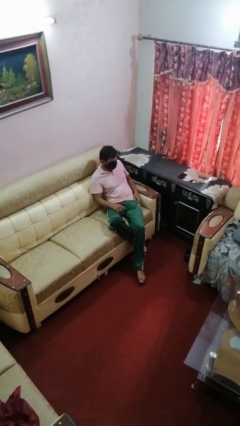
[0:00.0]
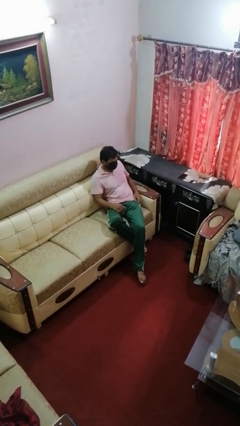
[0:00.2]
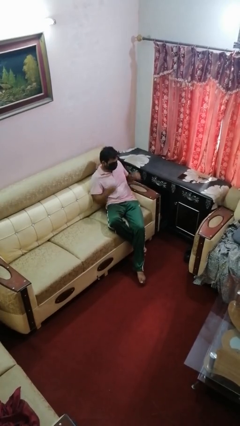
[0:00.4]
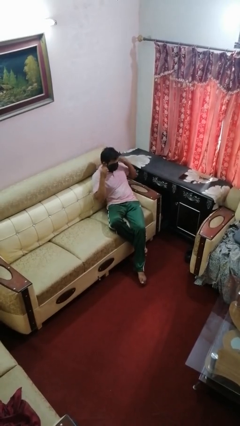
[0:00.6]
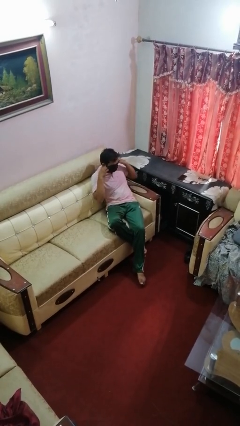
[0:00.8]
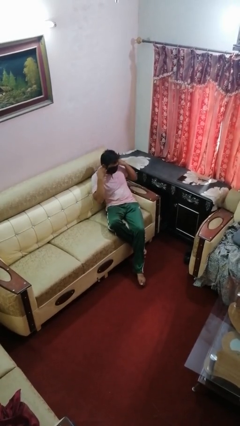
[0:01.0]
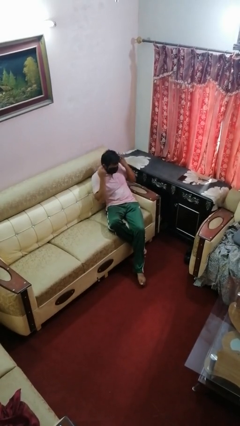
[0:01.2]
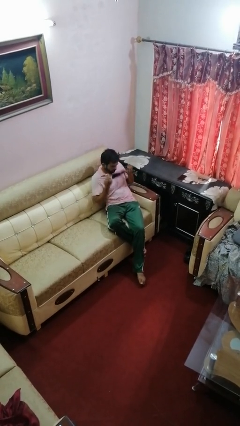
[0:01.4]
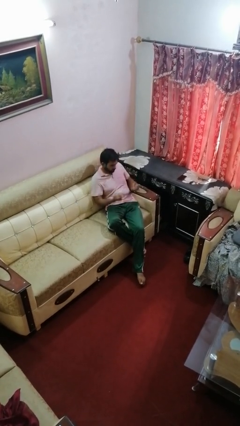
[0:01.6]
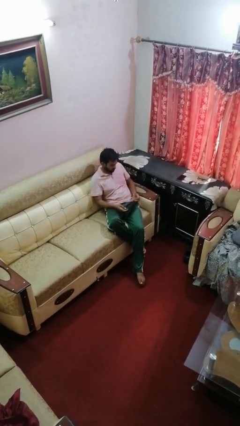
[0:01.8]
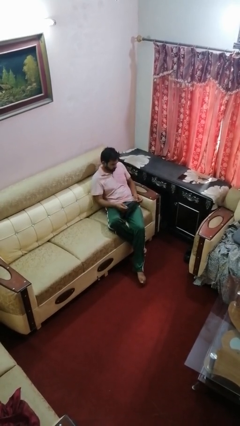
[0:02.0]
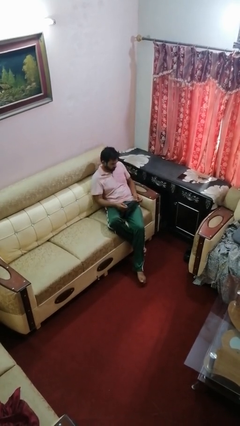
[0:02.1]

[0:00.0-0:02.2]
person takes off facemask

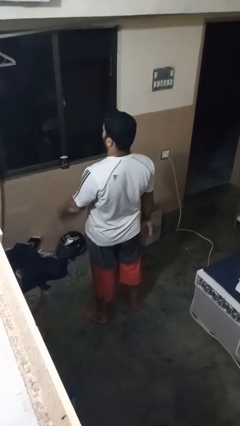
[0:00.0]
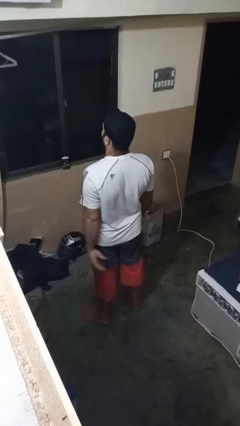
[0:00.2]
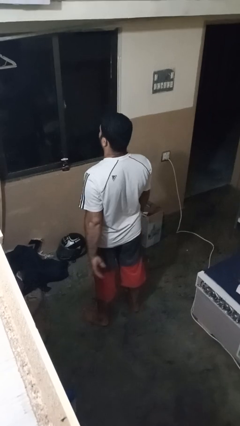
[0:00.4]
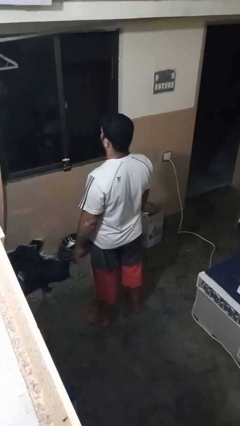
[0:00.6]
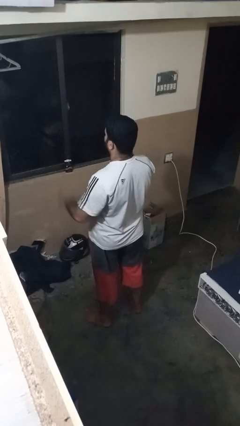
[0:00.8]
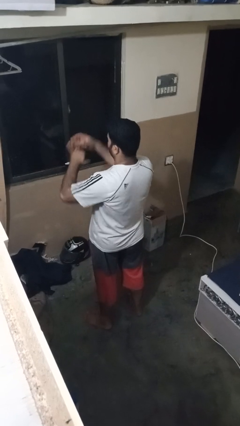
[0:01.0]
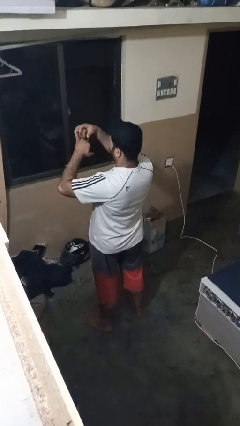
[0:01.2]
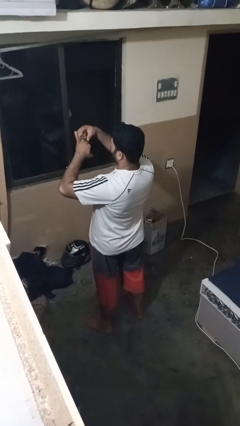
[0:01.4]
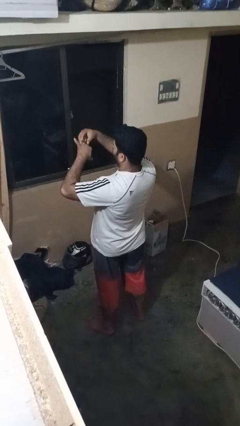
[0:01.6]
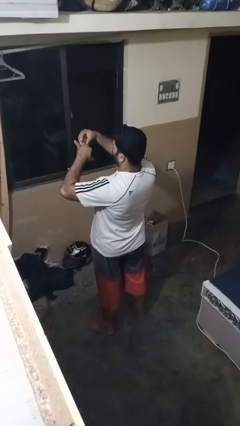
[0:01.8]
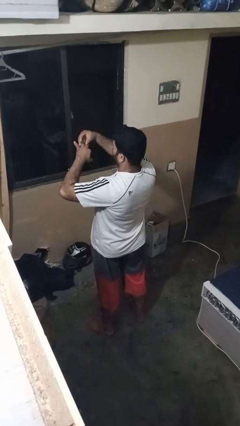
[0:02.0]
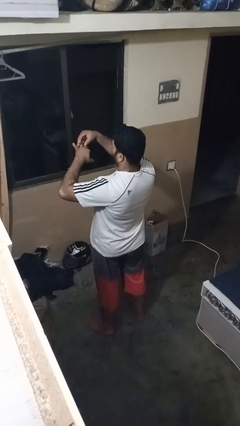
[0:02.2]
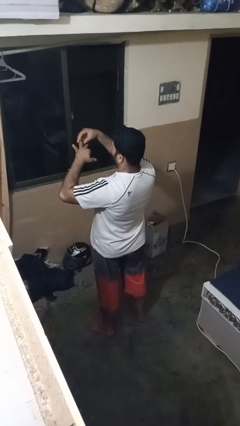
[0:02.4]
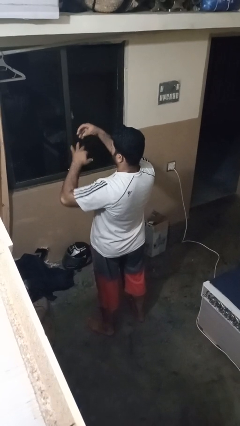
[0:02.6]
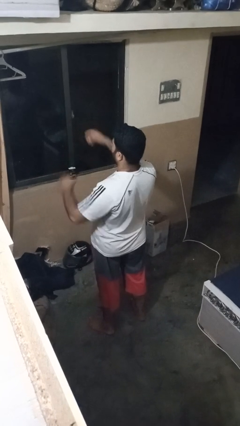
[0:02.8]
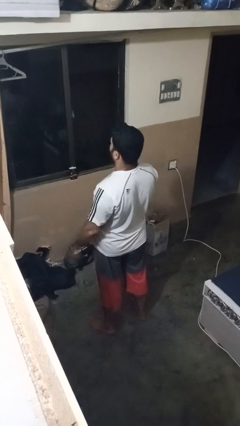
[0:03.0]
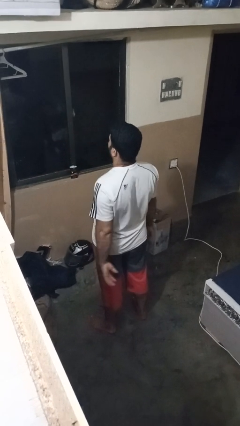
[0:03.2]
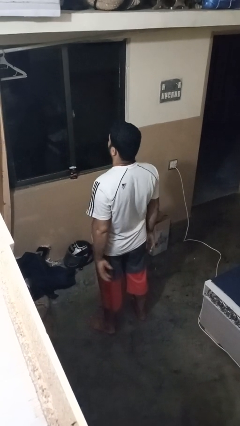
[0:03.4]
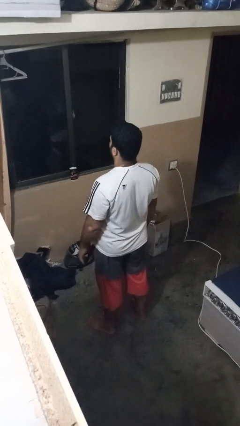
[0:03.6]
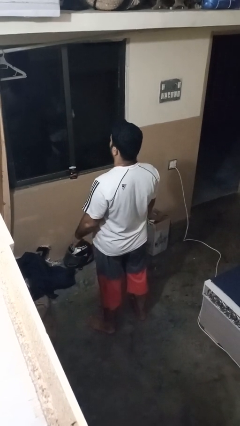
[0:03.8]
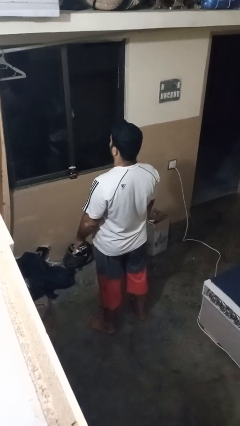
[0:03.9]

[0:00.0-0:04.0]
person takes off ring

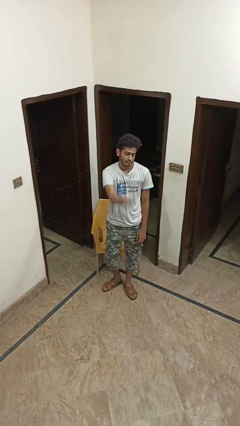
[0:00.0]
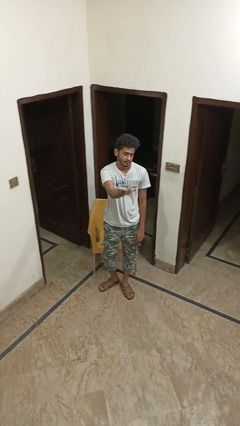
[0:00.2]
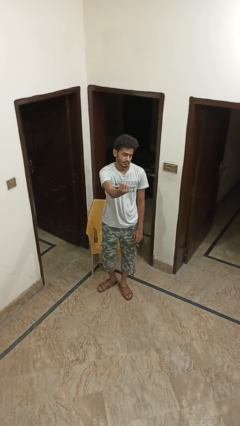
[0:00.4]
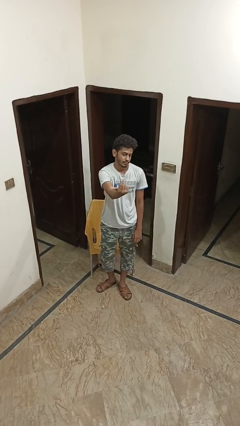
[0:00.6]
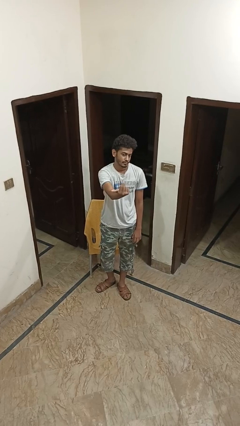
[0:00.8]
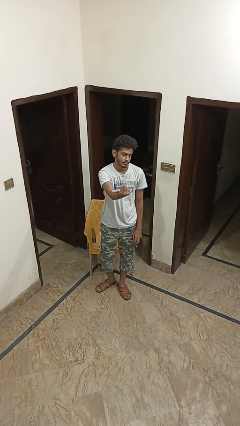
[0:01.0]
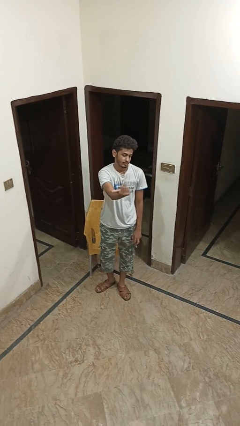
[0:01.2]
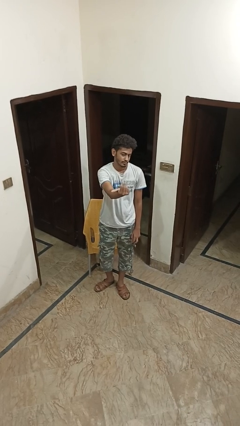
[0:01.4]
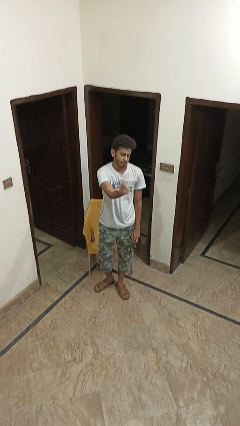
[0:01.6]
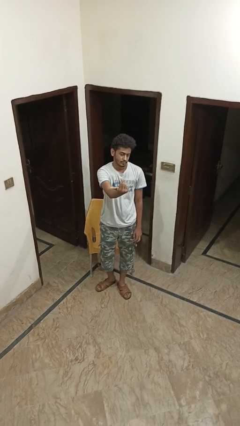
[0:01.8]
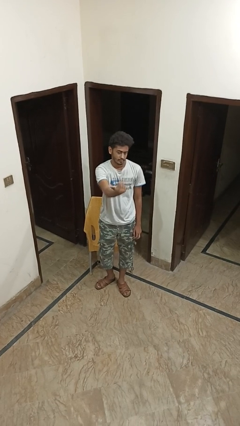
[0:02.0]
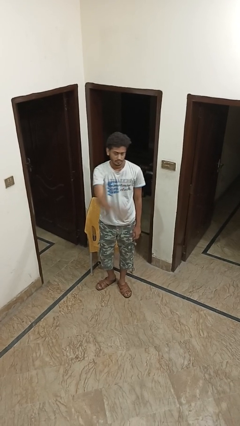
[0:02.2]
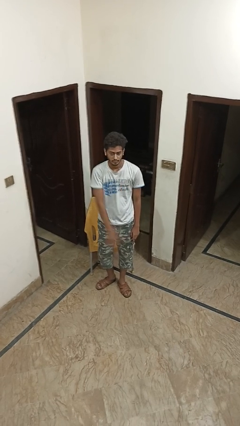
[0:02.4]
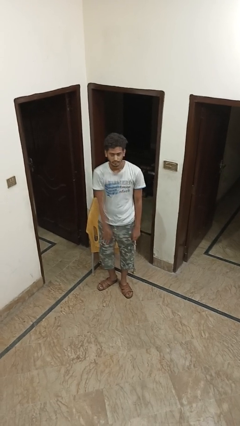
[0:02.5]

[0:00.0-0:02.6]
person gestures come here

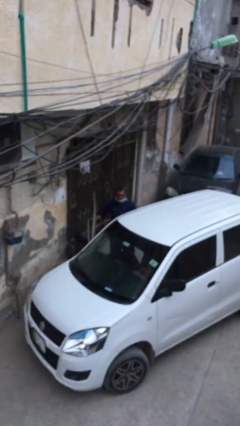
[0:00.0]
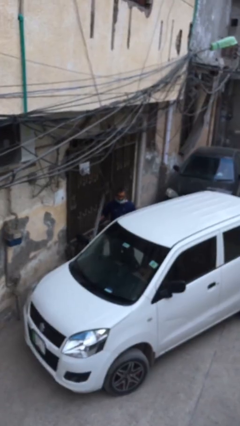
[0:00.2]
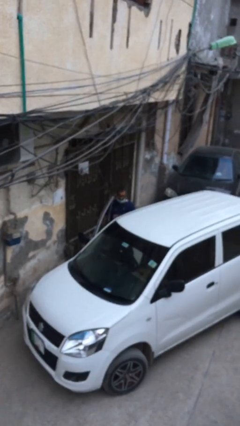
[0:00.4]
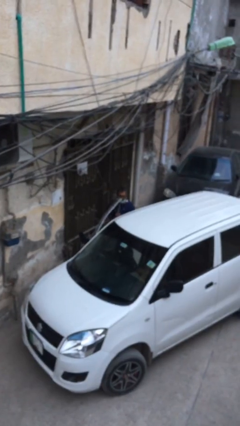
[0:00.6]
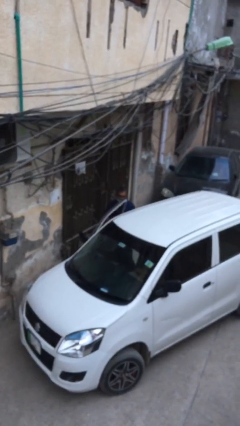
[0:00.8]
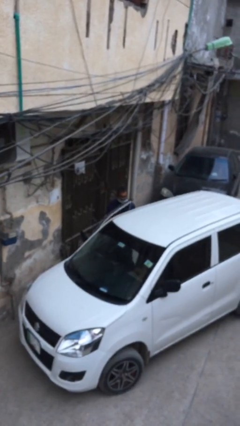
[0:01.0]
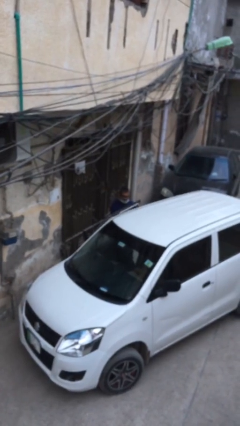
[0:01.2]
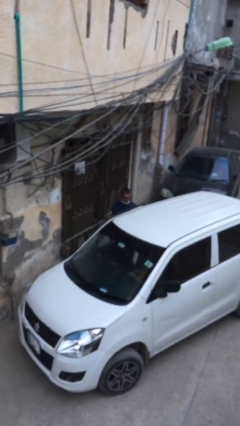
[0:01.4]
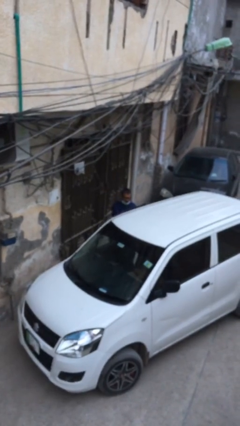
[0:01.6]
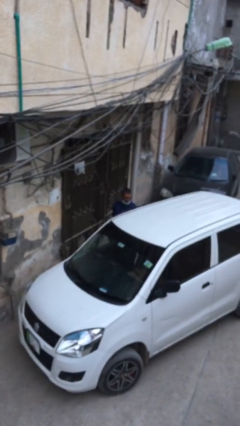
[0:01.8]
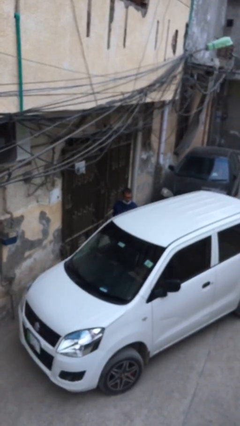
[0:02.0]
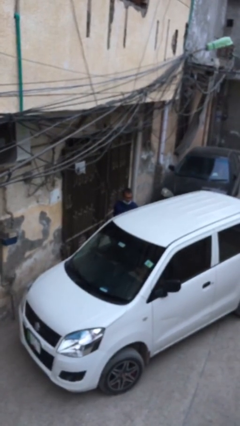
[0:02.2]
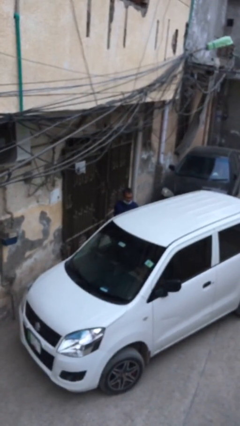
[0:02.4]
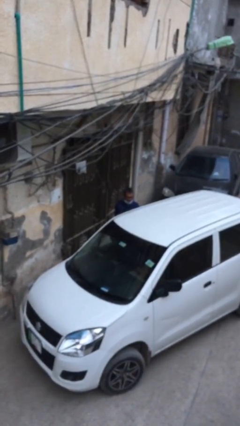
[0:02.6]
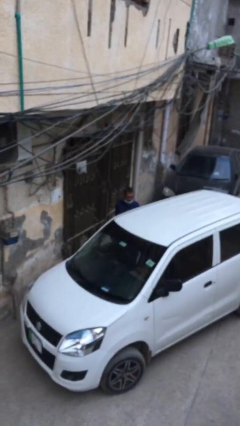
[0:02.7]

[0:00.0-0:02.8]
person closes car door

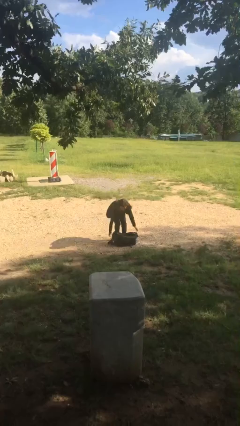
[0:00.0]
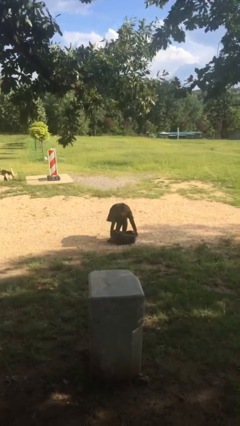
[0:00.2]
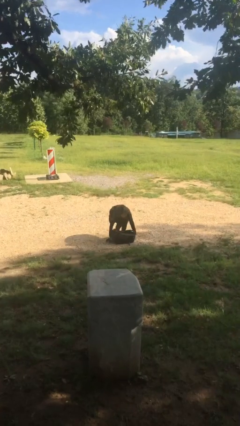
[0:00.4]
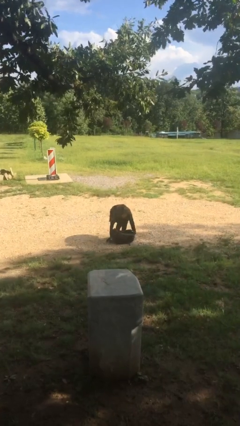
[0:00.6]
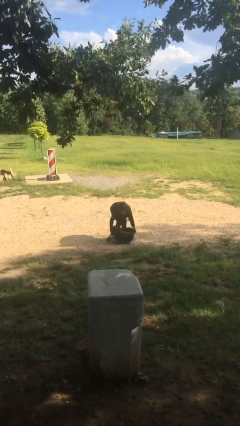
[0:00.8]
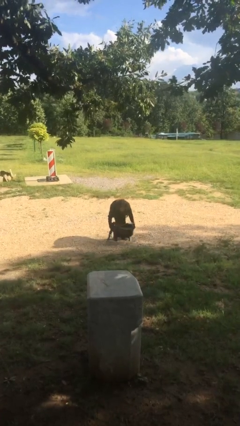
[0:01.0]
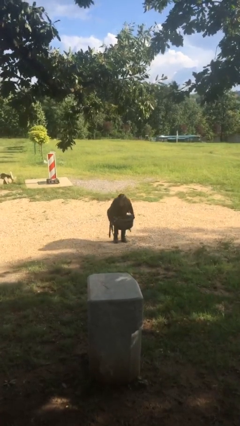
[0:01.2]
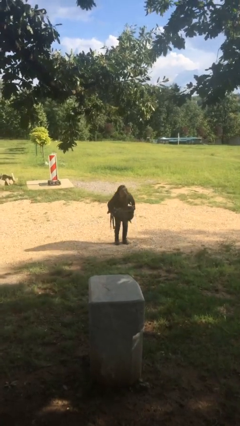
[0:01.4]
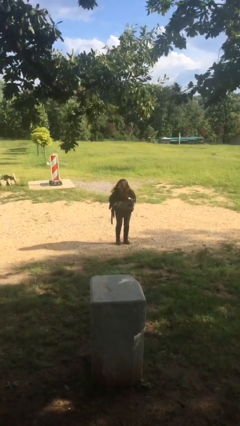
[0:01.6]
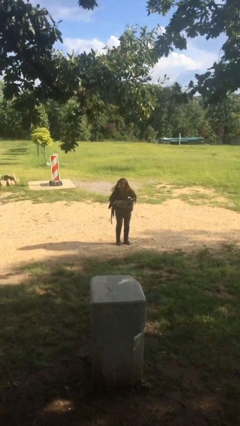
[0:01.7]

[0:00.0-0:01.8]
person picks up object from floor

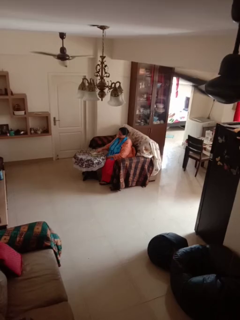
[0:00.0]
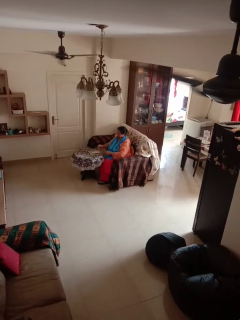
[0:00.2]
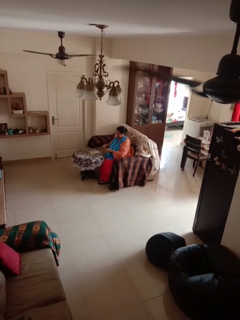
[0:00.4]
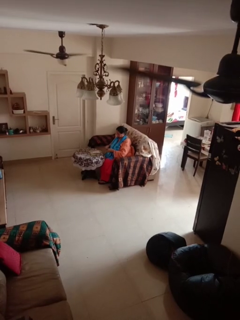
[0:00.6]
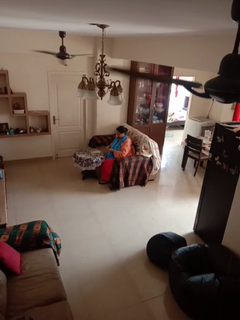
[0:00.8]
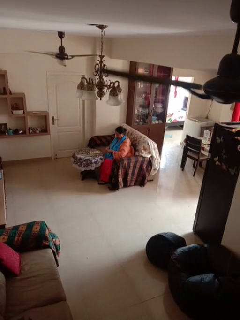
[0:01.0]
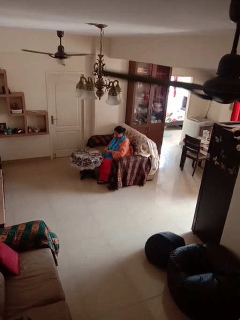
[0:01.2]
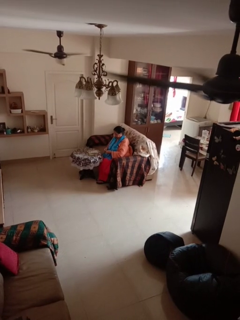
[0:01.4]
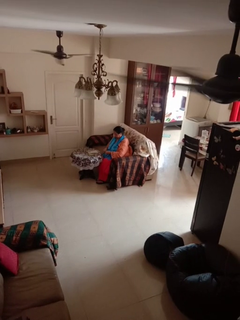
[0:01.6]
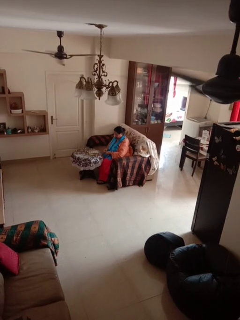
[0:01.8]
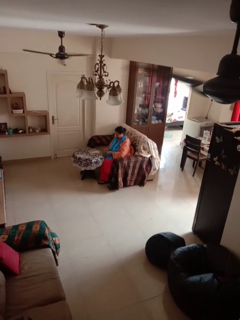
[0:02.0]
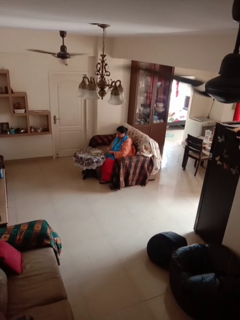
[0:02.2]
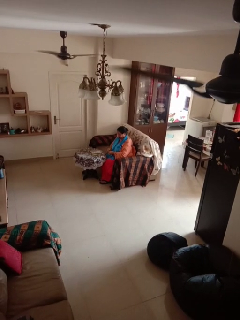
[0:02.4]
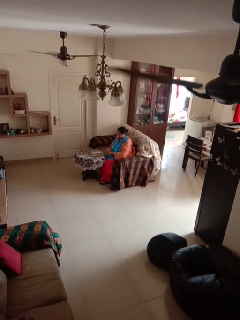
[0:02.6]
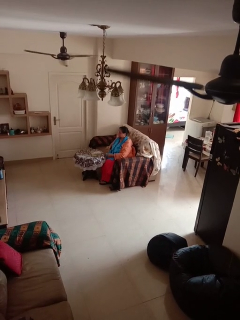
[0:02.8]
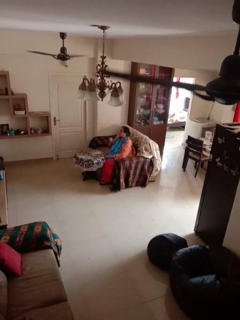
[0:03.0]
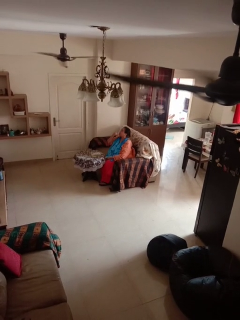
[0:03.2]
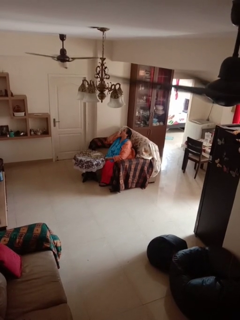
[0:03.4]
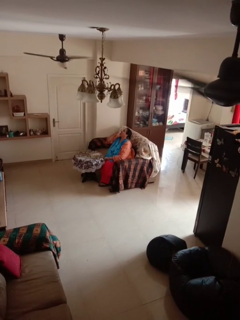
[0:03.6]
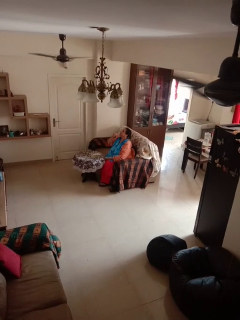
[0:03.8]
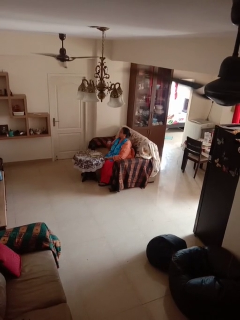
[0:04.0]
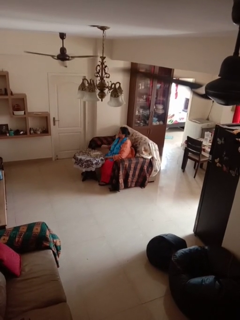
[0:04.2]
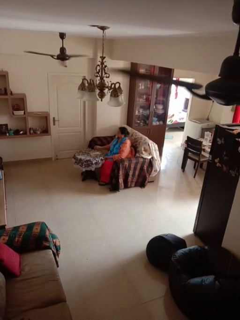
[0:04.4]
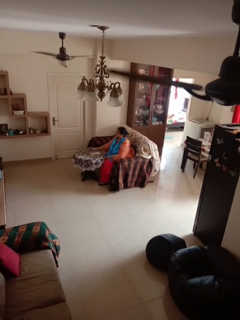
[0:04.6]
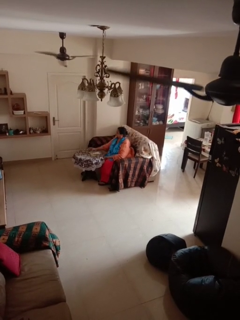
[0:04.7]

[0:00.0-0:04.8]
person takes medicine pills

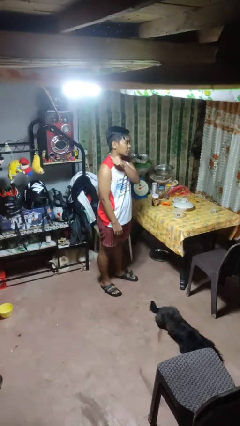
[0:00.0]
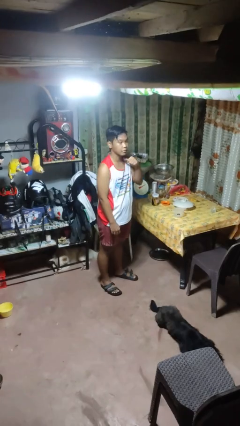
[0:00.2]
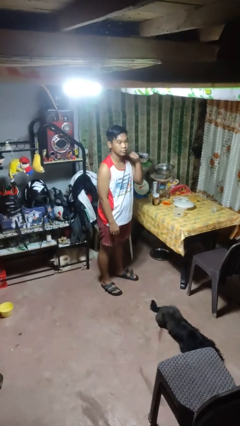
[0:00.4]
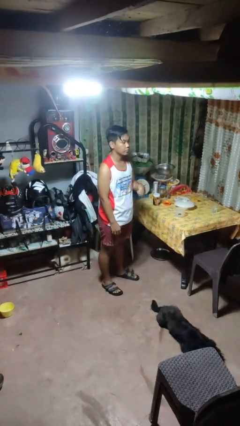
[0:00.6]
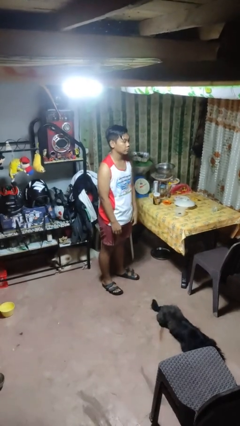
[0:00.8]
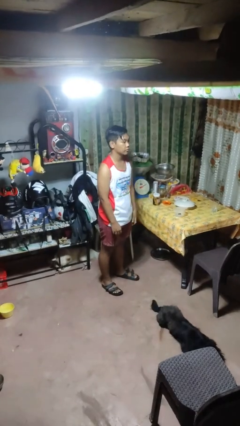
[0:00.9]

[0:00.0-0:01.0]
person gestures cut
